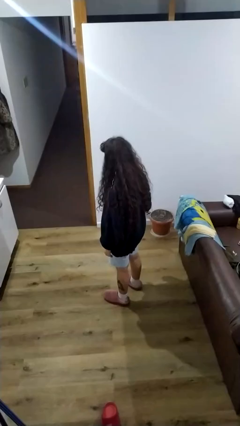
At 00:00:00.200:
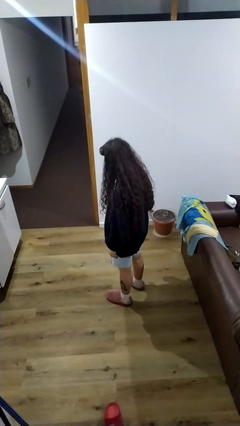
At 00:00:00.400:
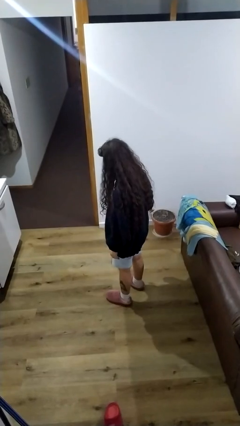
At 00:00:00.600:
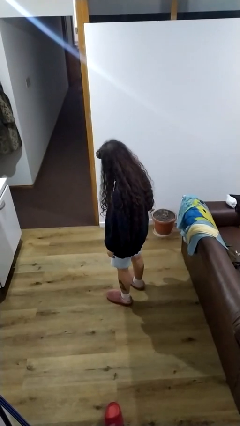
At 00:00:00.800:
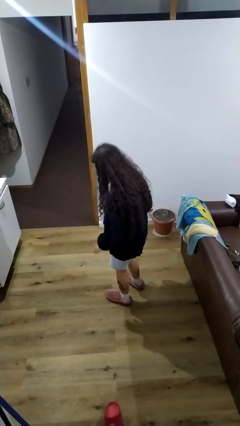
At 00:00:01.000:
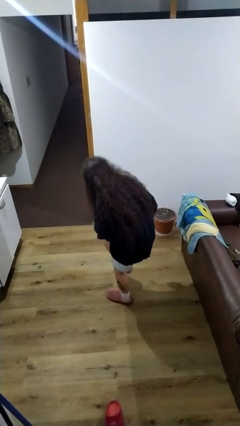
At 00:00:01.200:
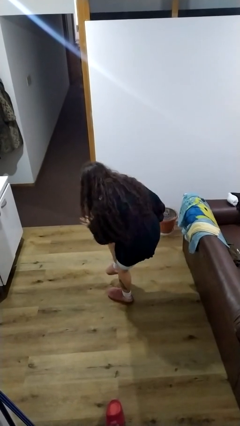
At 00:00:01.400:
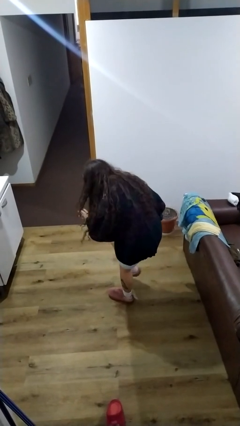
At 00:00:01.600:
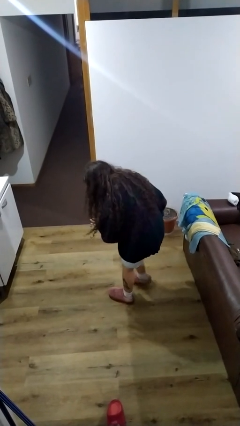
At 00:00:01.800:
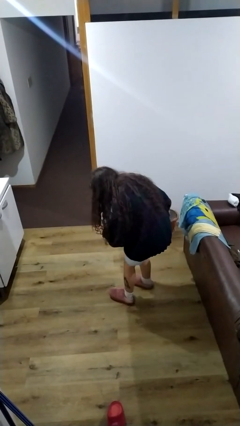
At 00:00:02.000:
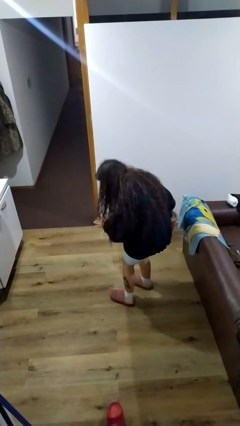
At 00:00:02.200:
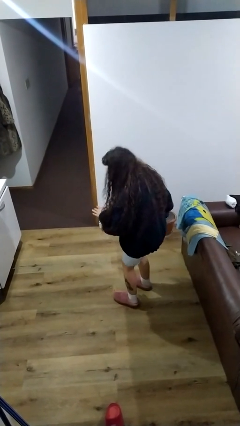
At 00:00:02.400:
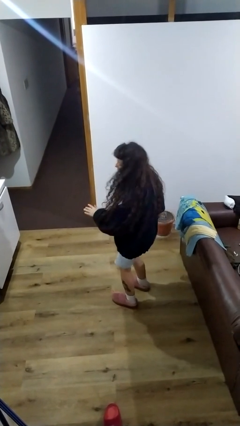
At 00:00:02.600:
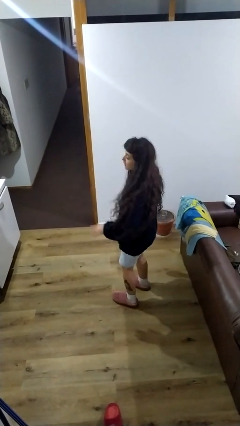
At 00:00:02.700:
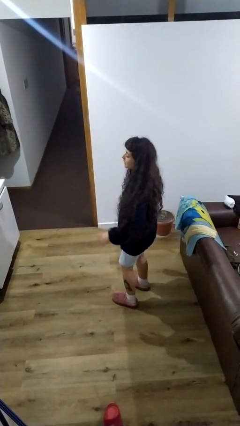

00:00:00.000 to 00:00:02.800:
person swats bug

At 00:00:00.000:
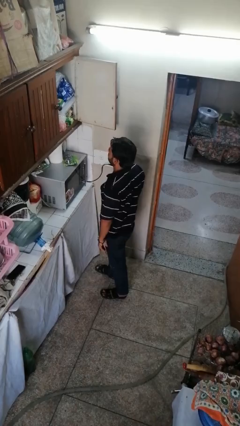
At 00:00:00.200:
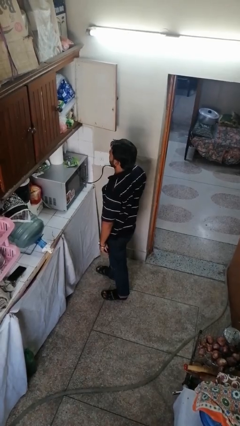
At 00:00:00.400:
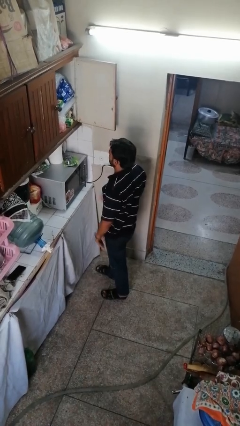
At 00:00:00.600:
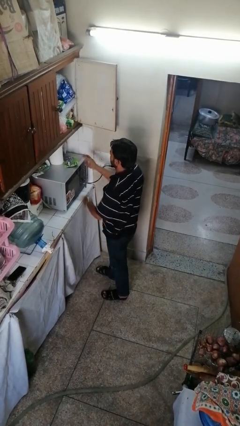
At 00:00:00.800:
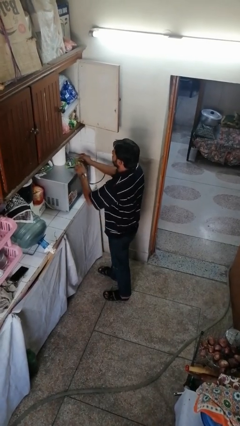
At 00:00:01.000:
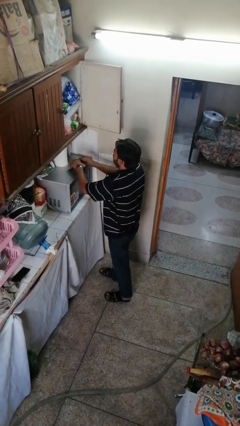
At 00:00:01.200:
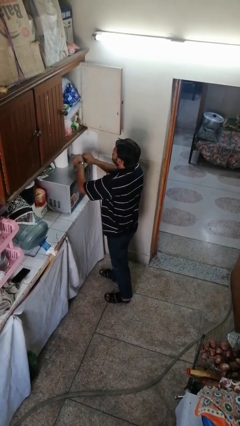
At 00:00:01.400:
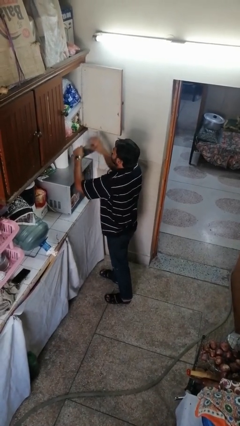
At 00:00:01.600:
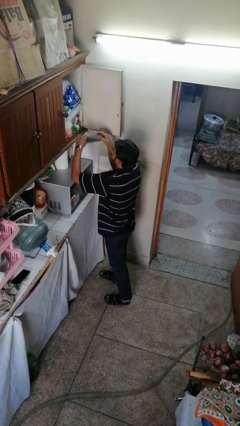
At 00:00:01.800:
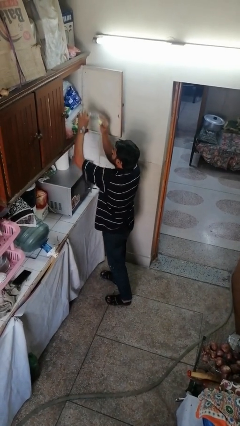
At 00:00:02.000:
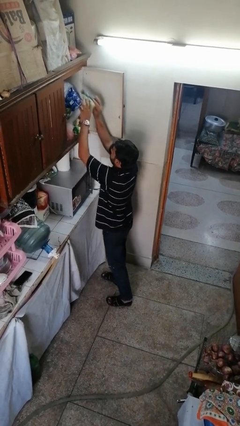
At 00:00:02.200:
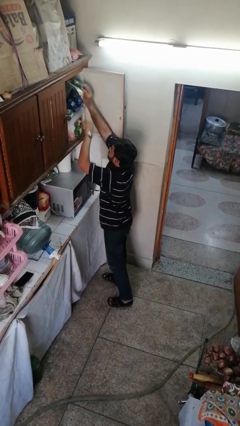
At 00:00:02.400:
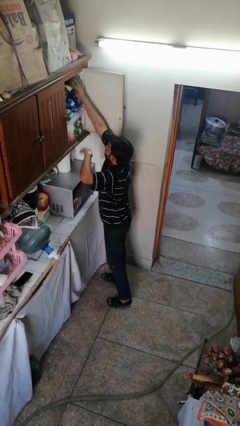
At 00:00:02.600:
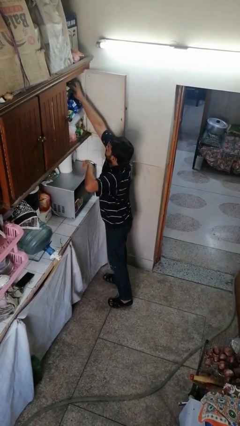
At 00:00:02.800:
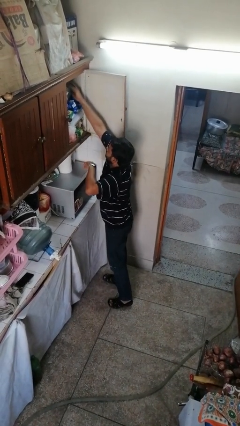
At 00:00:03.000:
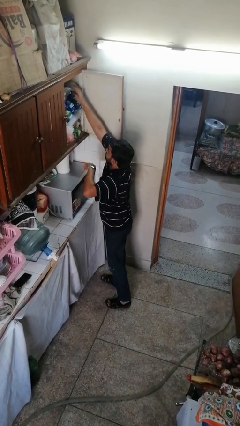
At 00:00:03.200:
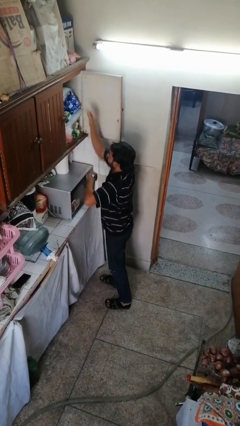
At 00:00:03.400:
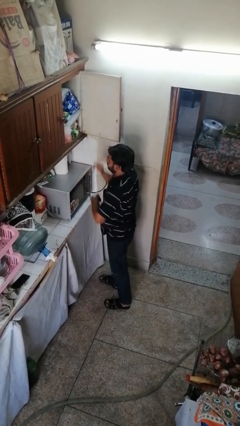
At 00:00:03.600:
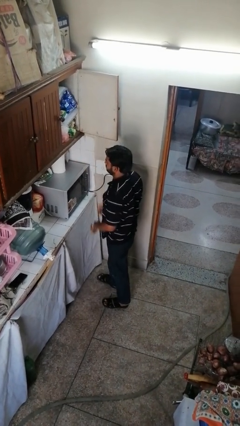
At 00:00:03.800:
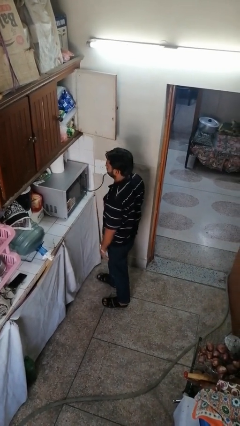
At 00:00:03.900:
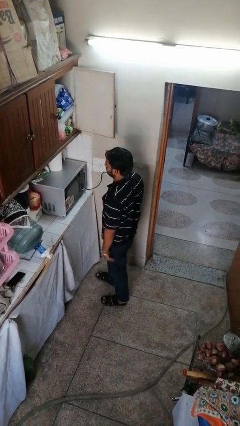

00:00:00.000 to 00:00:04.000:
person loads groceries into cabinet

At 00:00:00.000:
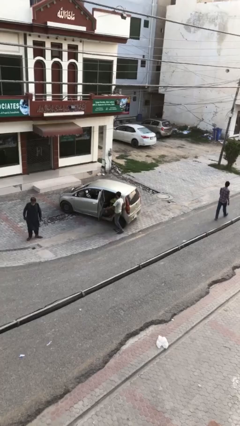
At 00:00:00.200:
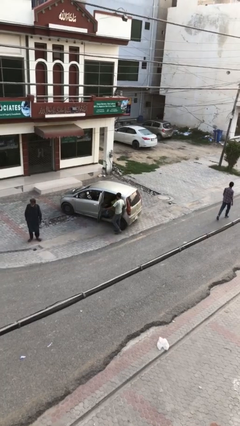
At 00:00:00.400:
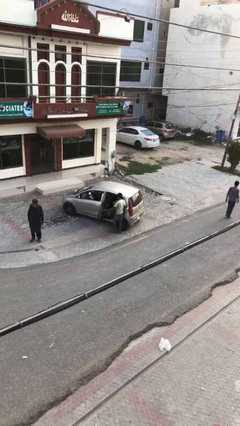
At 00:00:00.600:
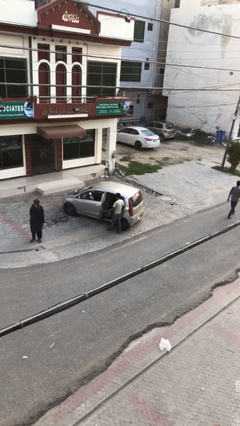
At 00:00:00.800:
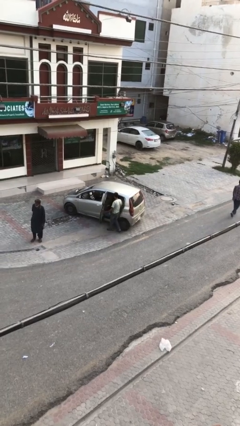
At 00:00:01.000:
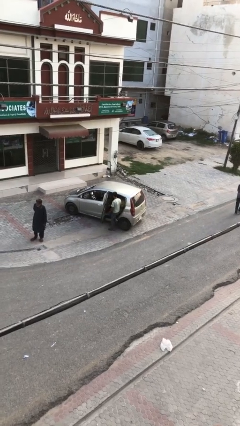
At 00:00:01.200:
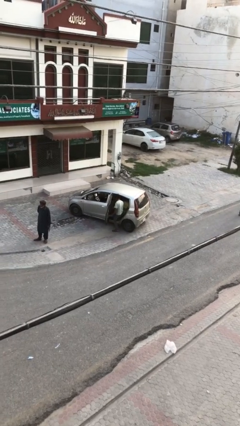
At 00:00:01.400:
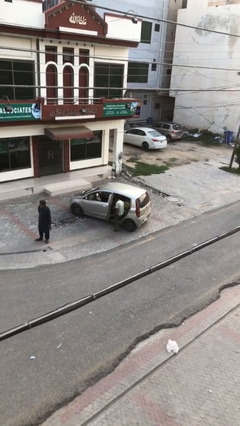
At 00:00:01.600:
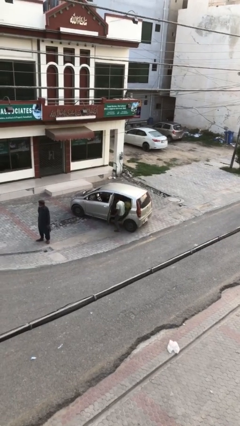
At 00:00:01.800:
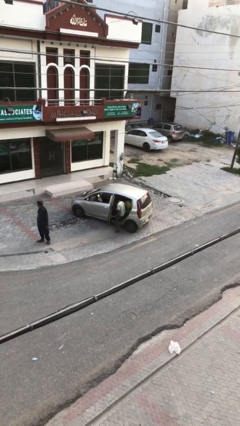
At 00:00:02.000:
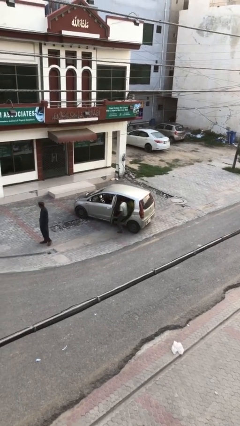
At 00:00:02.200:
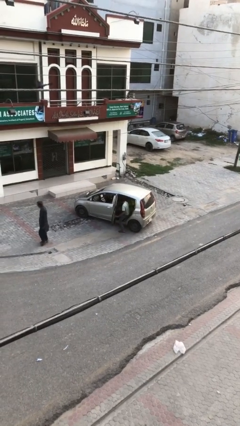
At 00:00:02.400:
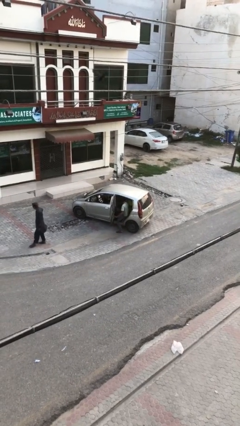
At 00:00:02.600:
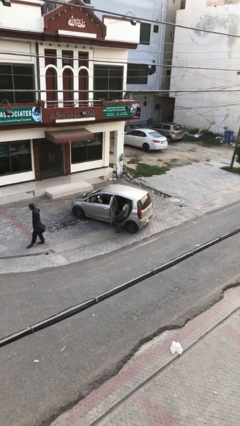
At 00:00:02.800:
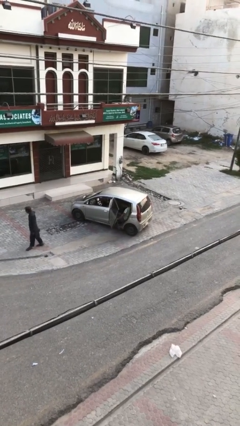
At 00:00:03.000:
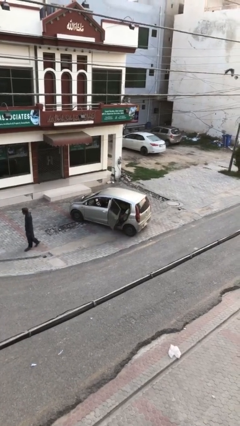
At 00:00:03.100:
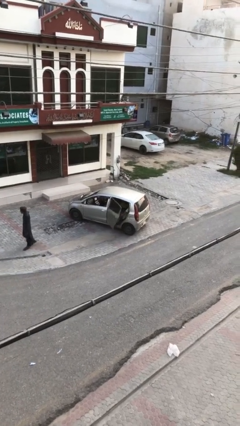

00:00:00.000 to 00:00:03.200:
person enters car

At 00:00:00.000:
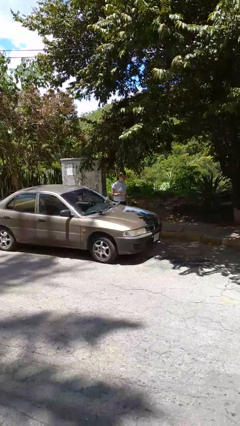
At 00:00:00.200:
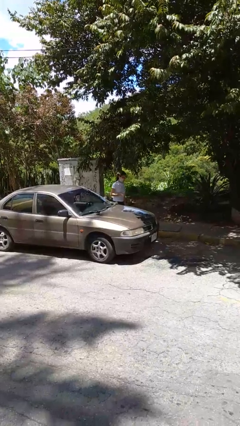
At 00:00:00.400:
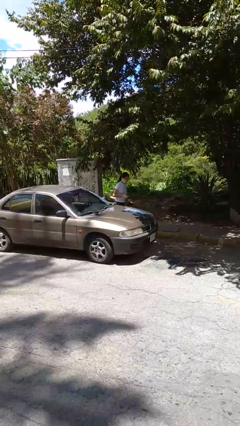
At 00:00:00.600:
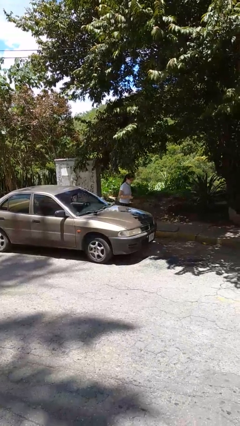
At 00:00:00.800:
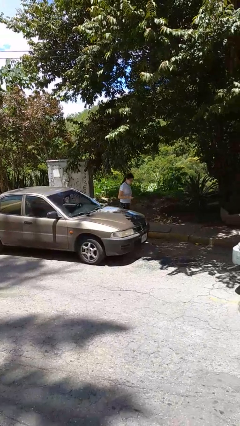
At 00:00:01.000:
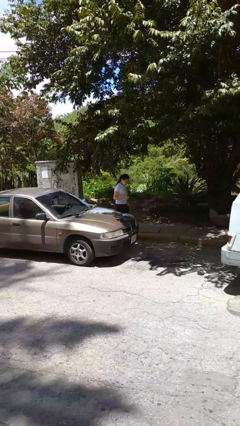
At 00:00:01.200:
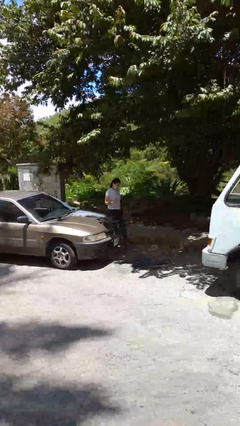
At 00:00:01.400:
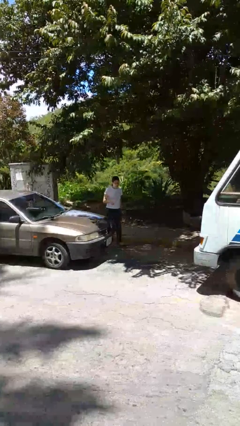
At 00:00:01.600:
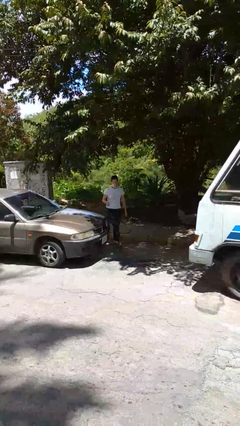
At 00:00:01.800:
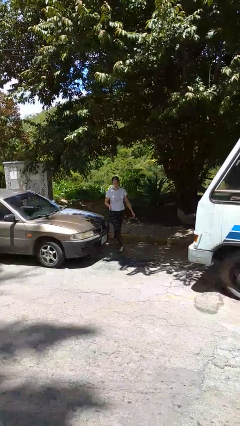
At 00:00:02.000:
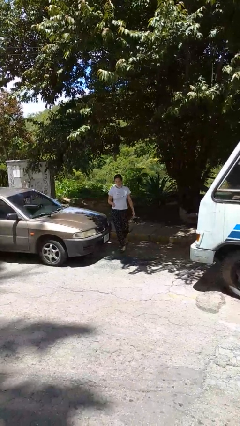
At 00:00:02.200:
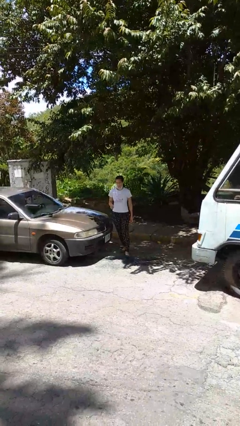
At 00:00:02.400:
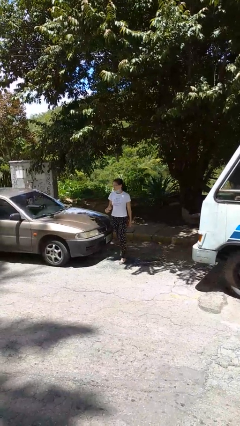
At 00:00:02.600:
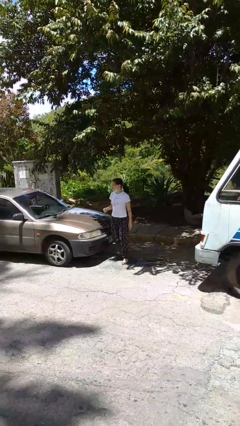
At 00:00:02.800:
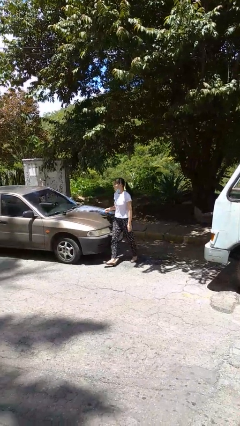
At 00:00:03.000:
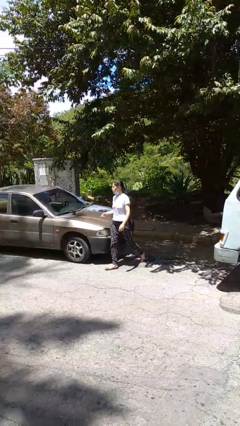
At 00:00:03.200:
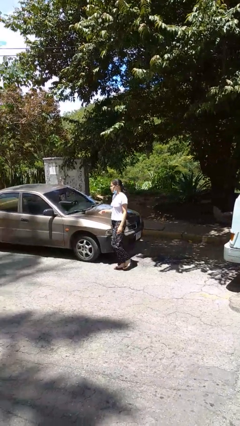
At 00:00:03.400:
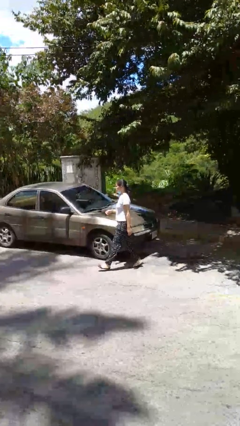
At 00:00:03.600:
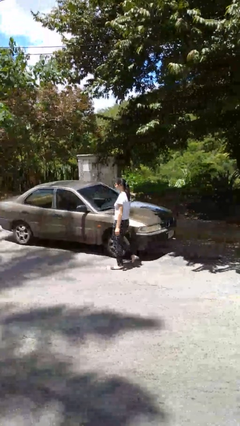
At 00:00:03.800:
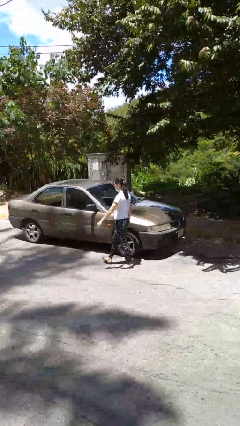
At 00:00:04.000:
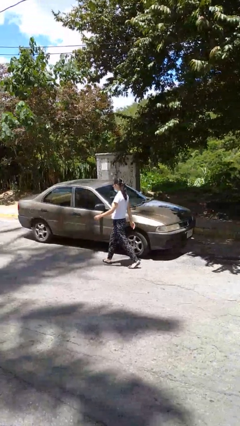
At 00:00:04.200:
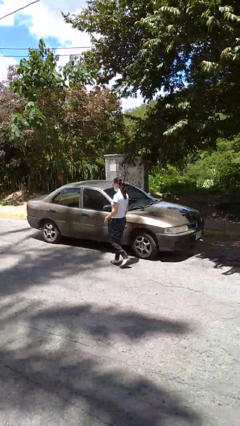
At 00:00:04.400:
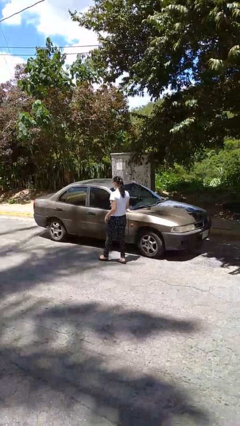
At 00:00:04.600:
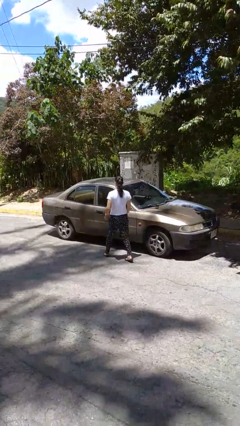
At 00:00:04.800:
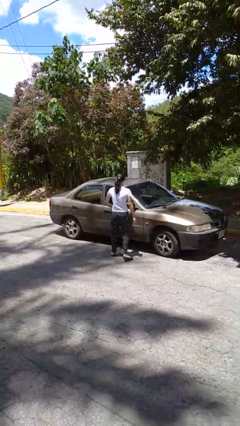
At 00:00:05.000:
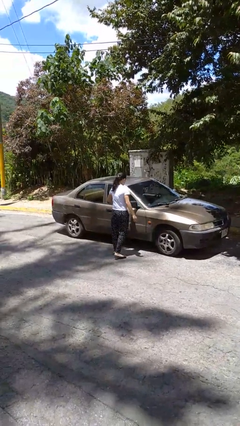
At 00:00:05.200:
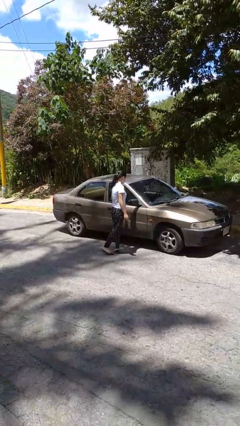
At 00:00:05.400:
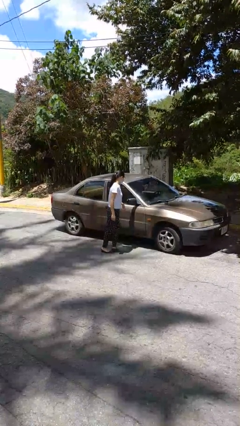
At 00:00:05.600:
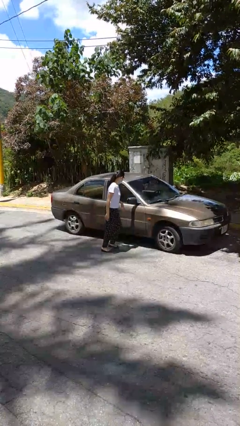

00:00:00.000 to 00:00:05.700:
person walks around car

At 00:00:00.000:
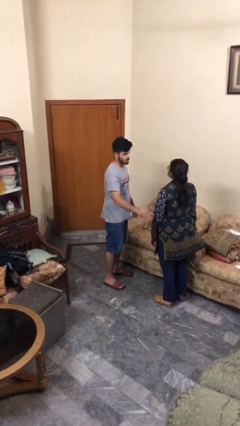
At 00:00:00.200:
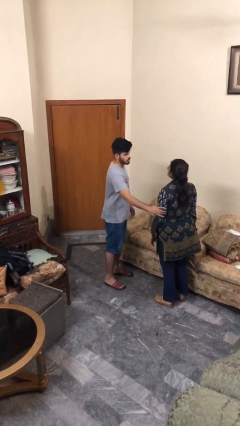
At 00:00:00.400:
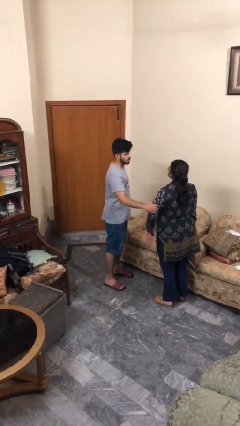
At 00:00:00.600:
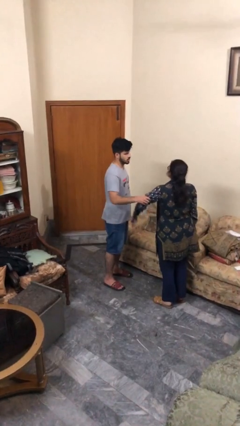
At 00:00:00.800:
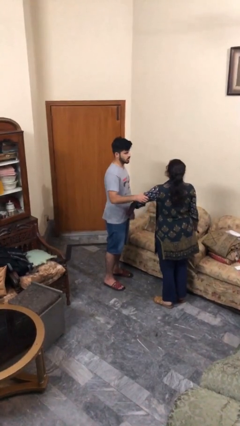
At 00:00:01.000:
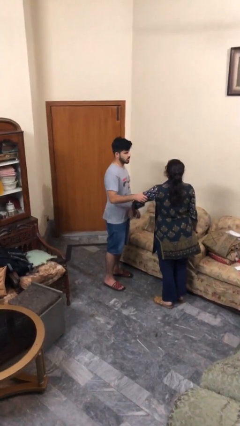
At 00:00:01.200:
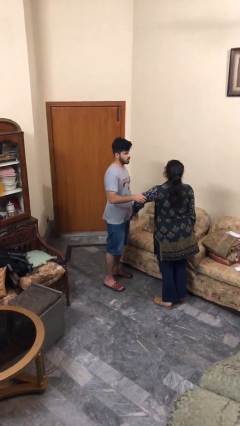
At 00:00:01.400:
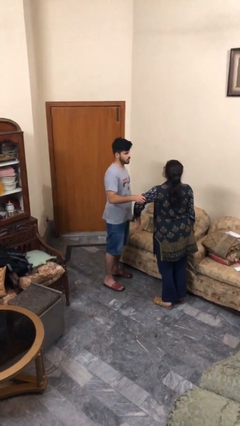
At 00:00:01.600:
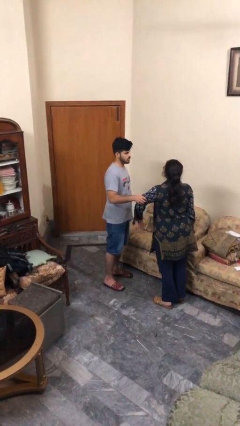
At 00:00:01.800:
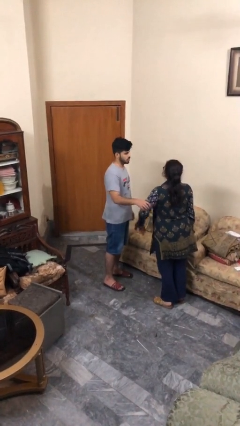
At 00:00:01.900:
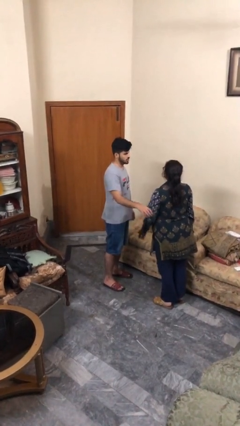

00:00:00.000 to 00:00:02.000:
person grabs person by bicep
